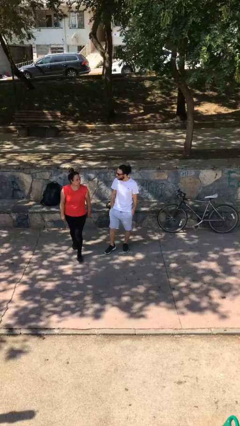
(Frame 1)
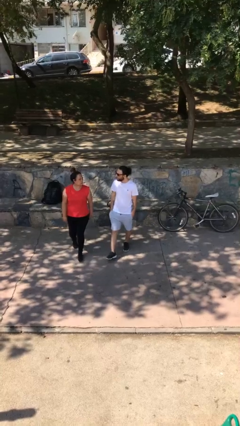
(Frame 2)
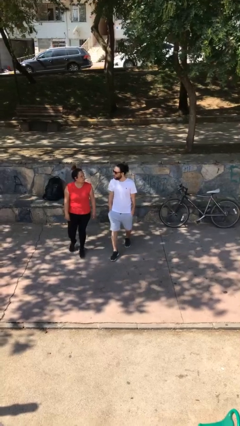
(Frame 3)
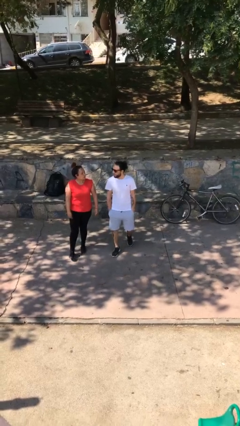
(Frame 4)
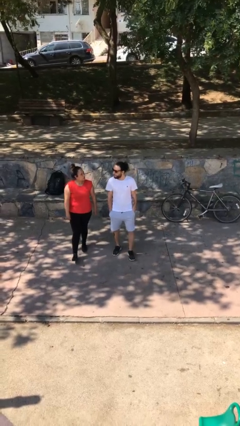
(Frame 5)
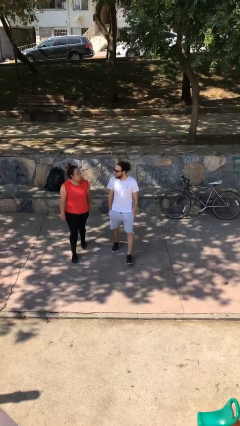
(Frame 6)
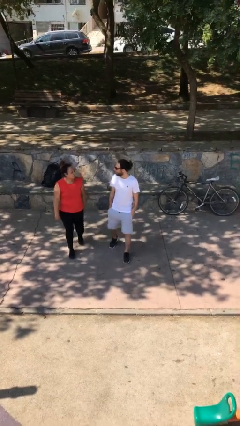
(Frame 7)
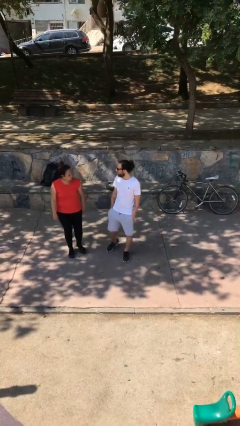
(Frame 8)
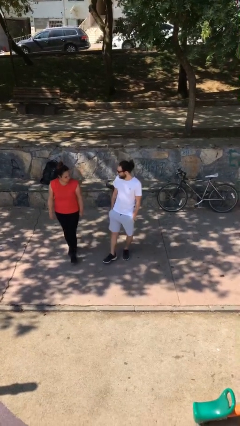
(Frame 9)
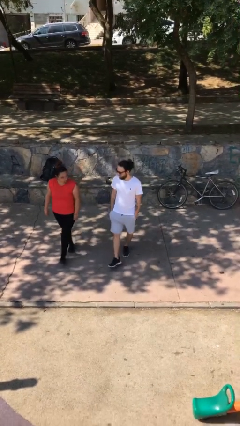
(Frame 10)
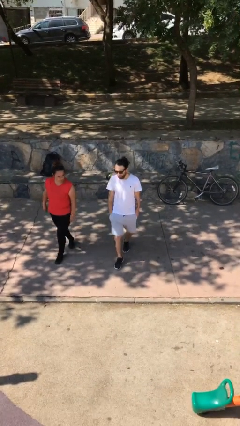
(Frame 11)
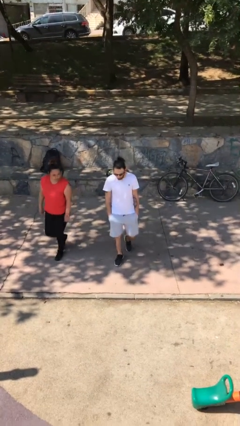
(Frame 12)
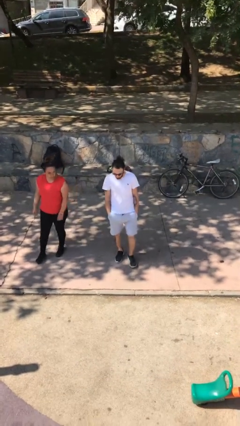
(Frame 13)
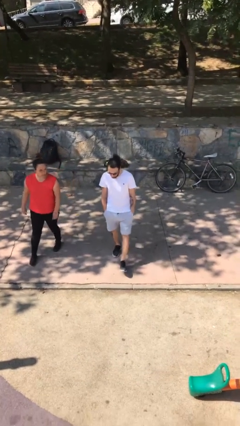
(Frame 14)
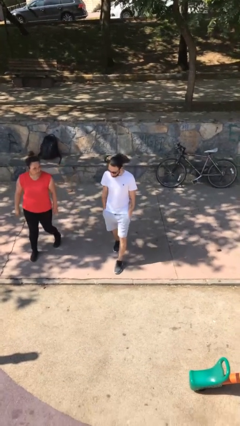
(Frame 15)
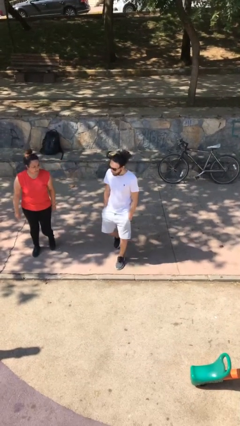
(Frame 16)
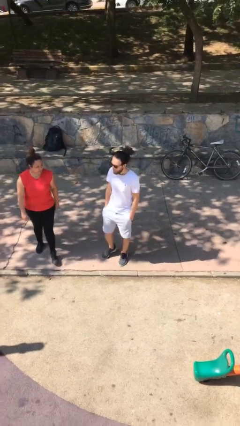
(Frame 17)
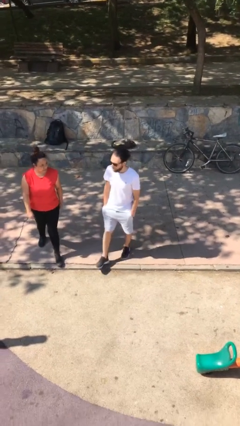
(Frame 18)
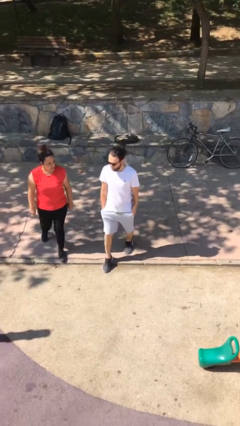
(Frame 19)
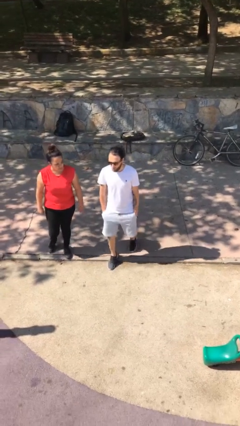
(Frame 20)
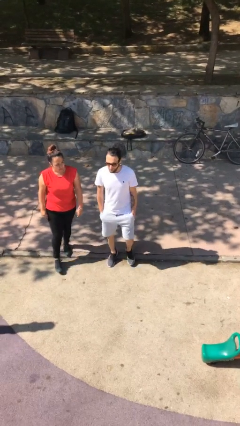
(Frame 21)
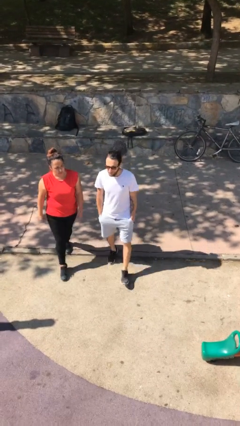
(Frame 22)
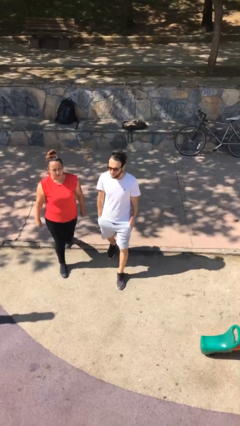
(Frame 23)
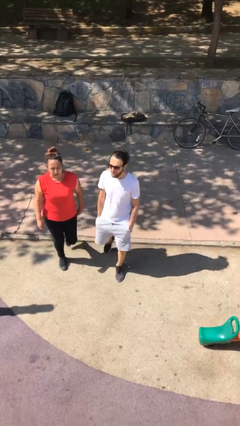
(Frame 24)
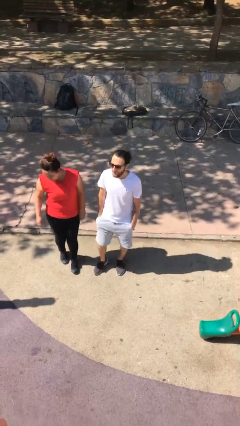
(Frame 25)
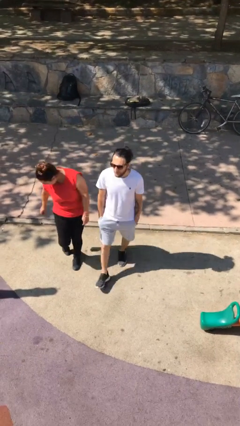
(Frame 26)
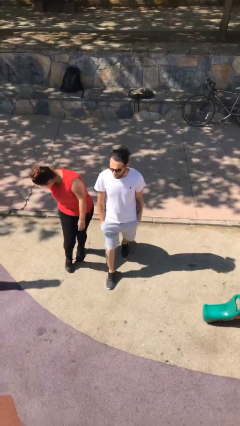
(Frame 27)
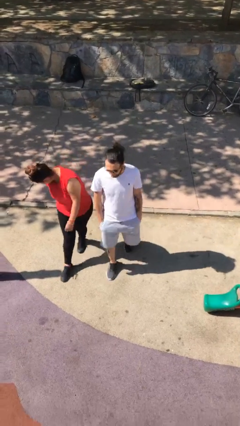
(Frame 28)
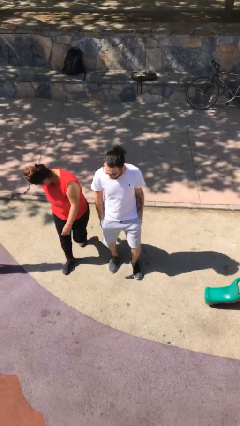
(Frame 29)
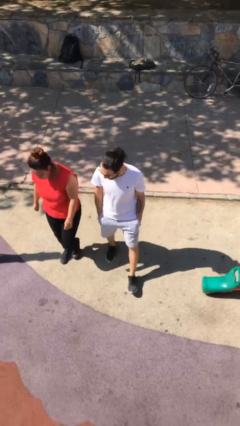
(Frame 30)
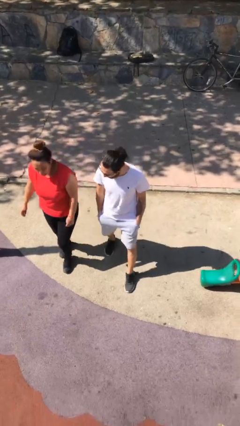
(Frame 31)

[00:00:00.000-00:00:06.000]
person talks to person

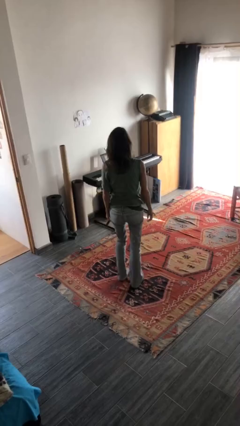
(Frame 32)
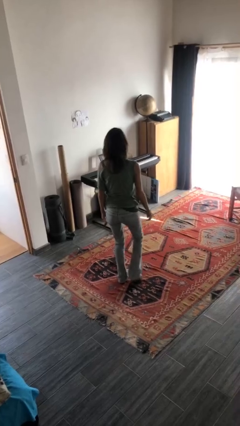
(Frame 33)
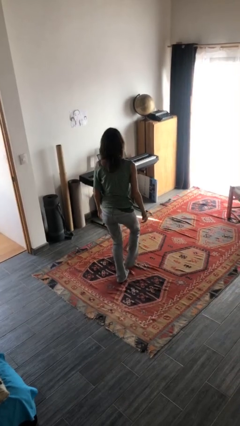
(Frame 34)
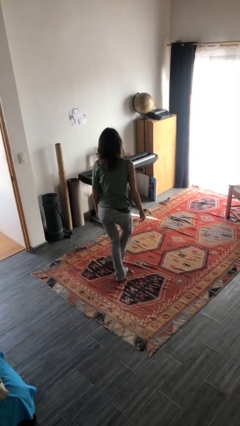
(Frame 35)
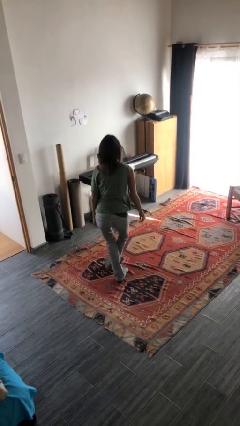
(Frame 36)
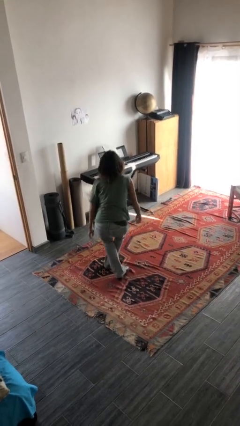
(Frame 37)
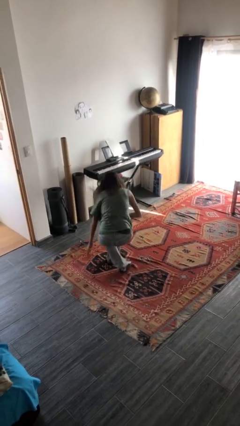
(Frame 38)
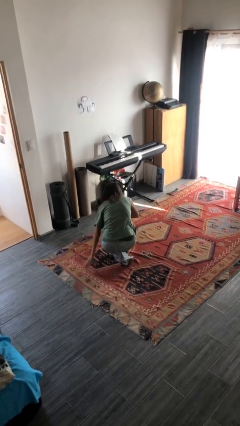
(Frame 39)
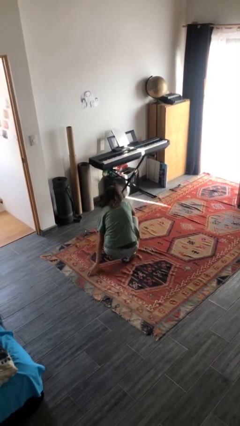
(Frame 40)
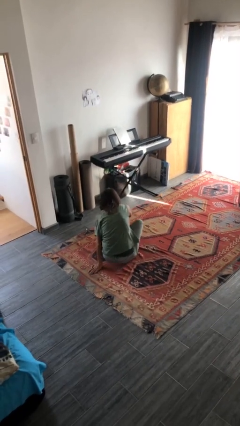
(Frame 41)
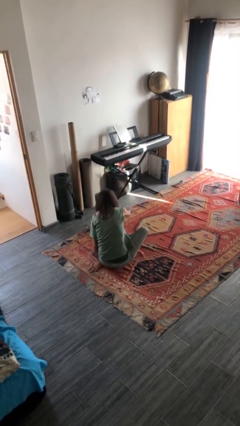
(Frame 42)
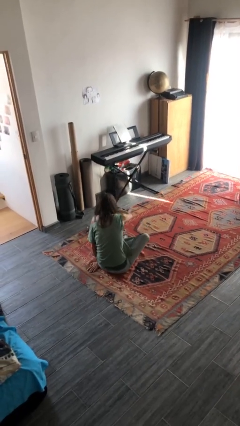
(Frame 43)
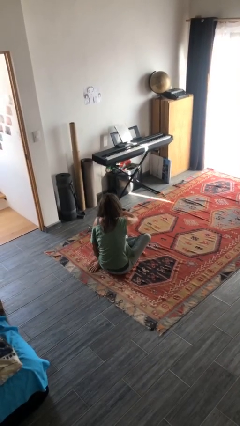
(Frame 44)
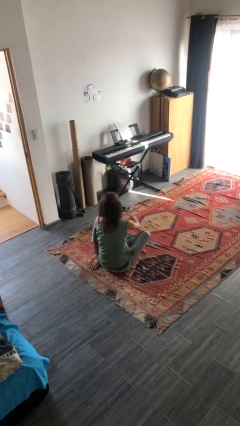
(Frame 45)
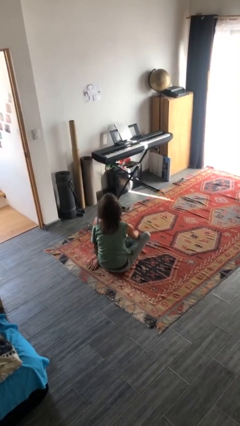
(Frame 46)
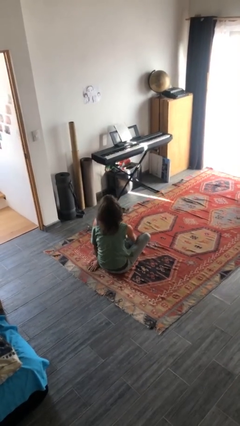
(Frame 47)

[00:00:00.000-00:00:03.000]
person sits crisscross

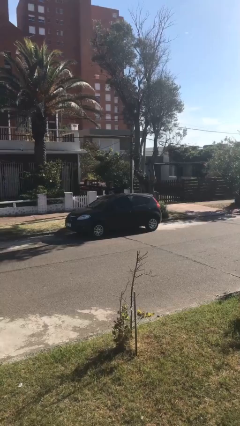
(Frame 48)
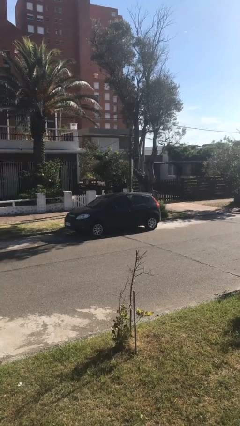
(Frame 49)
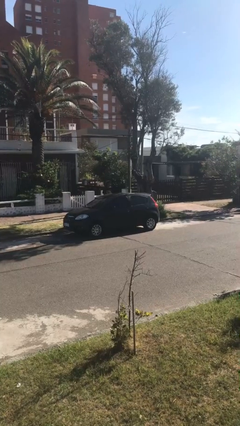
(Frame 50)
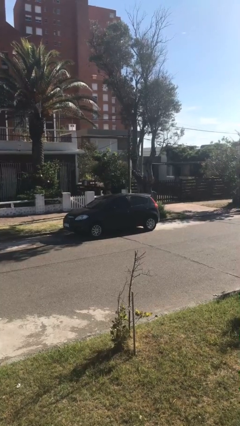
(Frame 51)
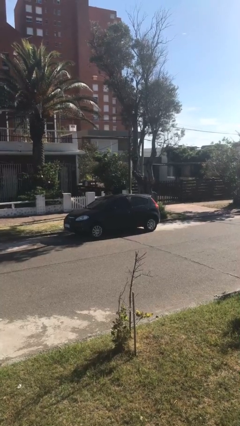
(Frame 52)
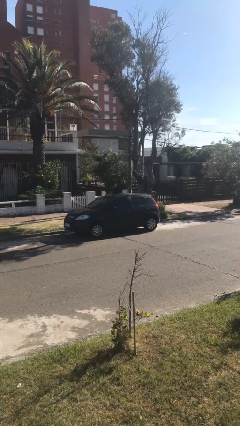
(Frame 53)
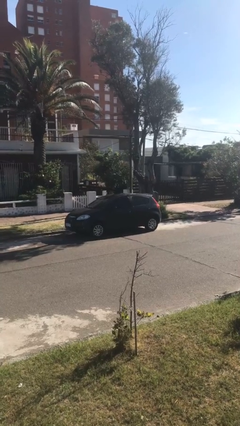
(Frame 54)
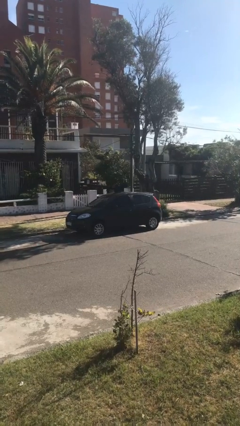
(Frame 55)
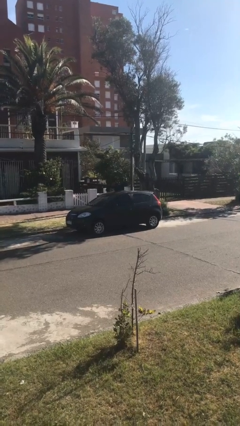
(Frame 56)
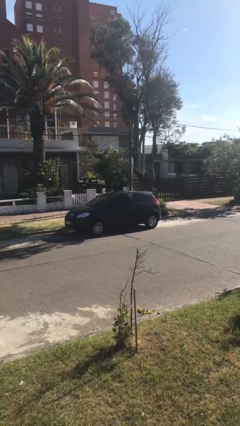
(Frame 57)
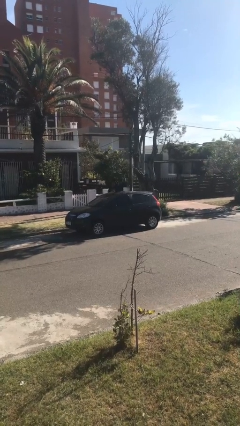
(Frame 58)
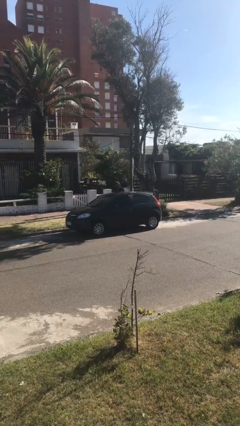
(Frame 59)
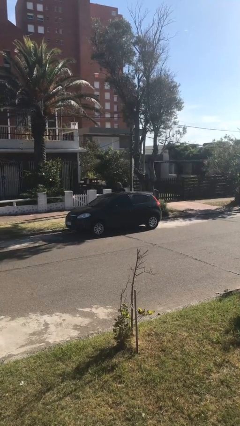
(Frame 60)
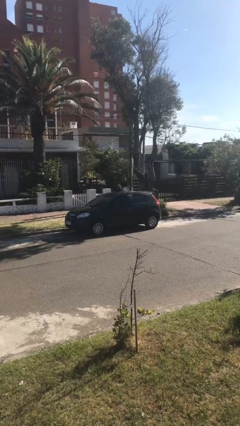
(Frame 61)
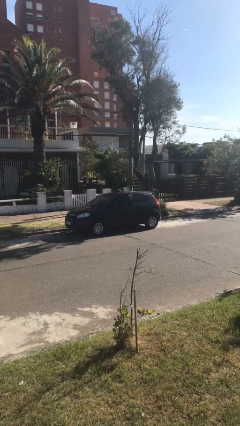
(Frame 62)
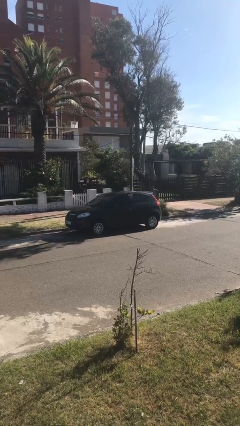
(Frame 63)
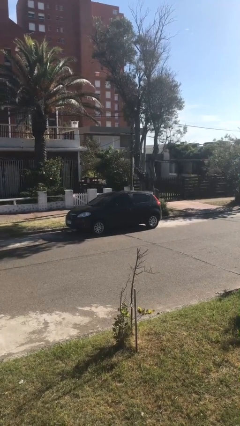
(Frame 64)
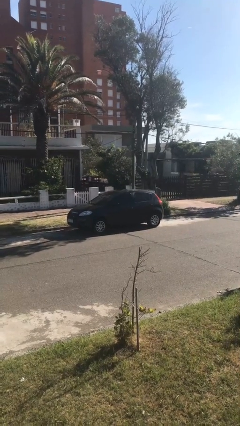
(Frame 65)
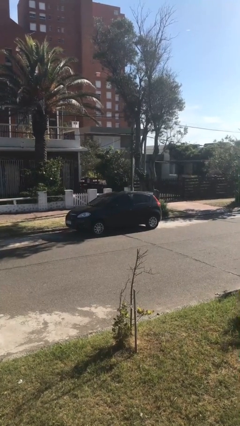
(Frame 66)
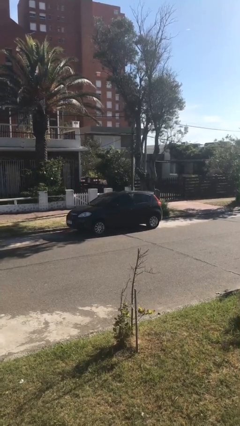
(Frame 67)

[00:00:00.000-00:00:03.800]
car picks up person

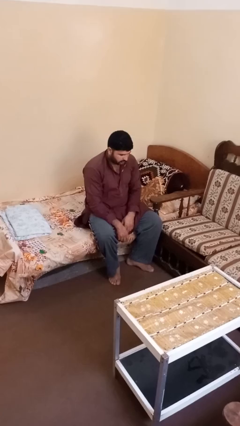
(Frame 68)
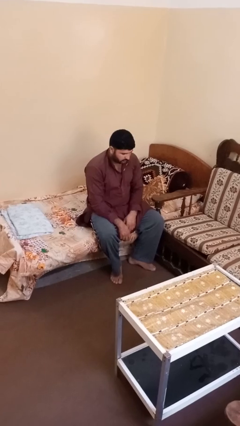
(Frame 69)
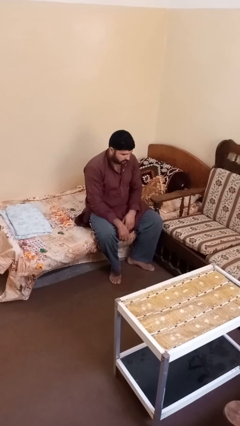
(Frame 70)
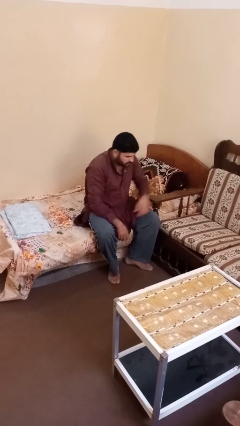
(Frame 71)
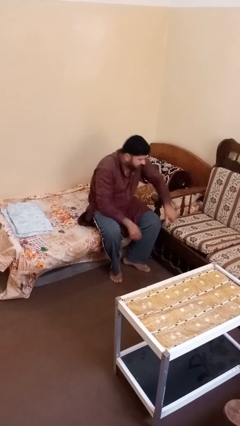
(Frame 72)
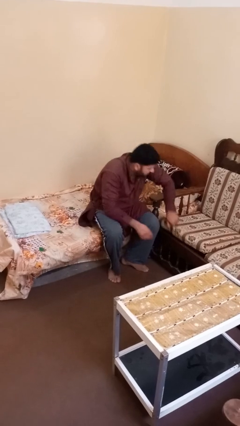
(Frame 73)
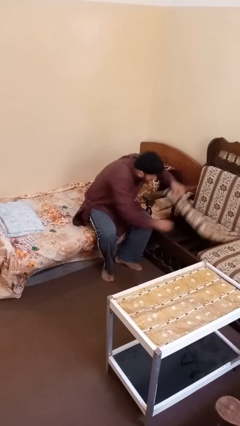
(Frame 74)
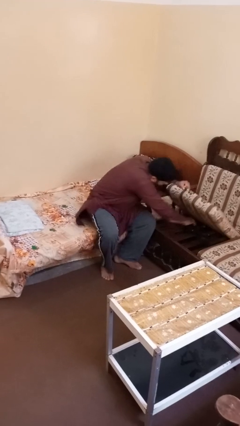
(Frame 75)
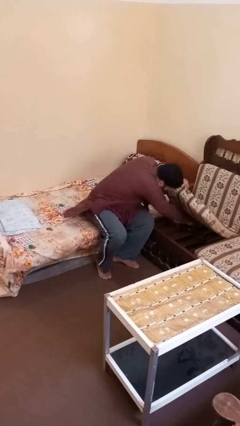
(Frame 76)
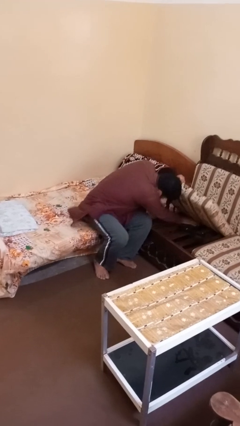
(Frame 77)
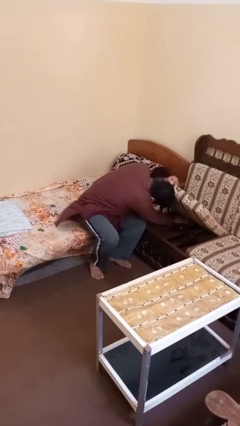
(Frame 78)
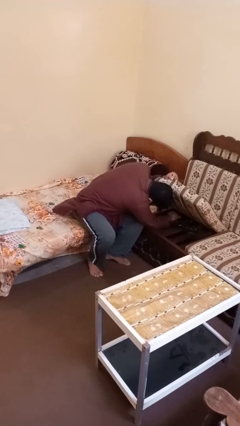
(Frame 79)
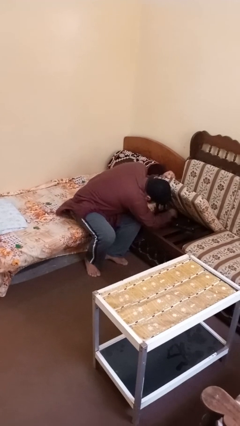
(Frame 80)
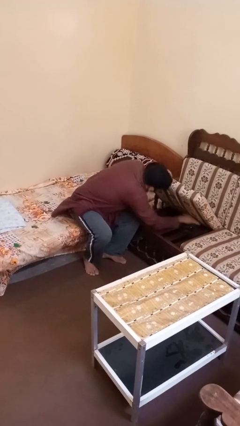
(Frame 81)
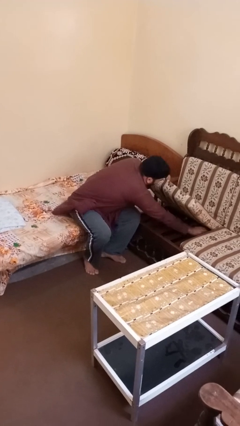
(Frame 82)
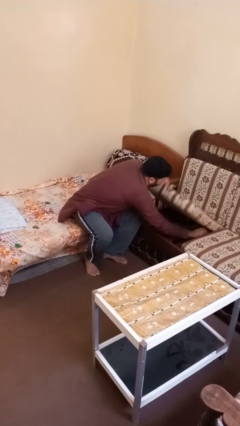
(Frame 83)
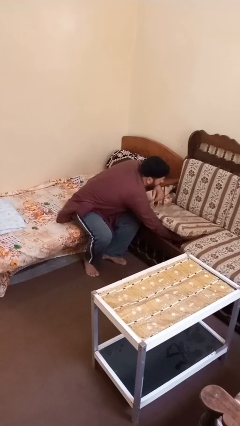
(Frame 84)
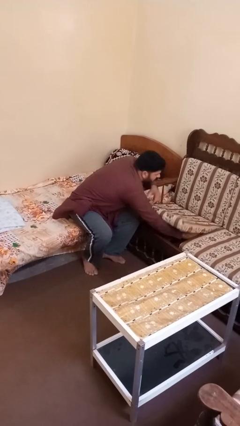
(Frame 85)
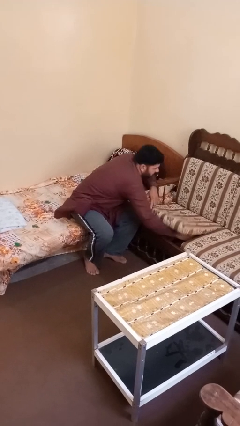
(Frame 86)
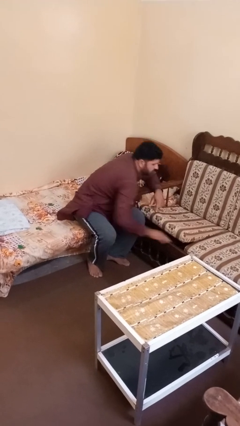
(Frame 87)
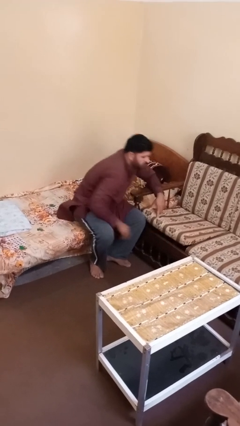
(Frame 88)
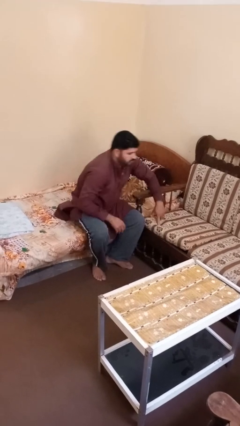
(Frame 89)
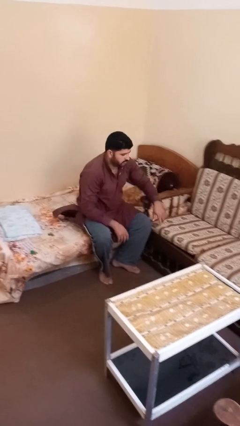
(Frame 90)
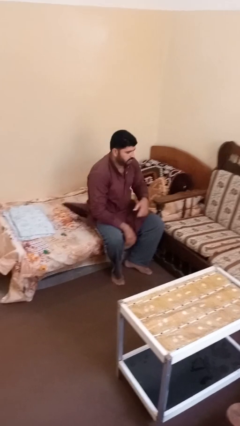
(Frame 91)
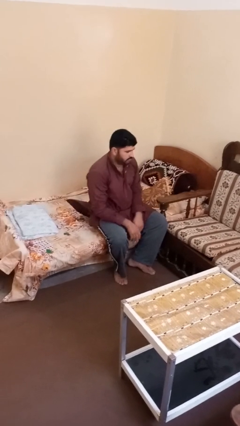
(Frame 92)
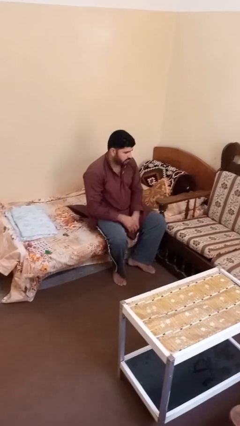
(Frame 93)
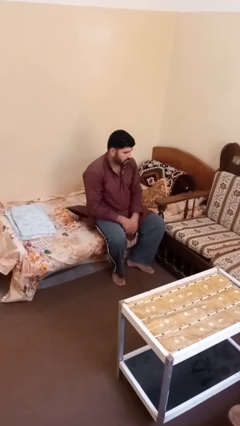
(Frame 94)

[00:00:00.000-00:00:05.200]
person searches under couch
